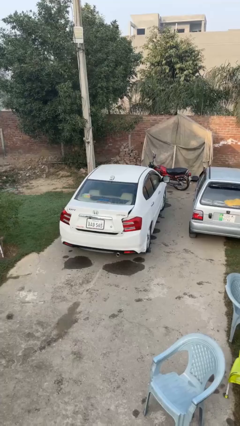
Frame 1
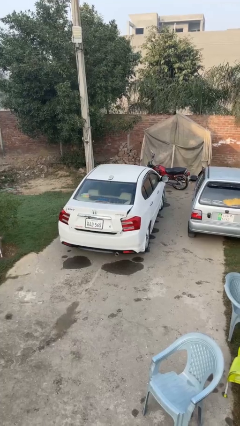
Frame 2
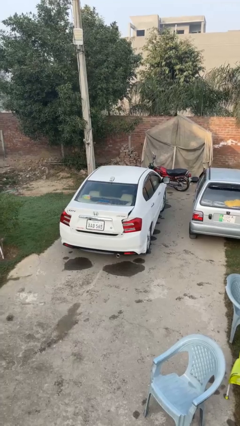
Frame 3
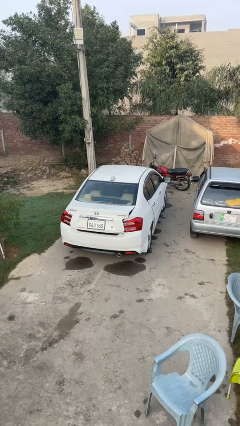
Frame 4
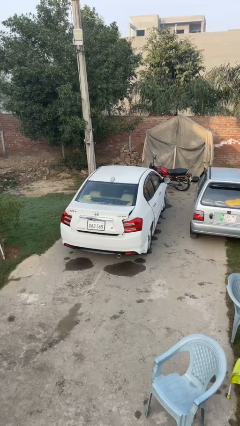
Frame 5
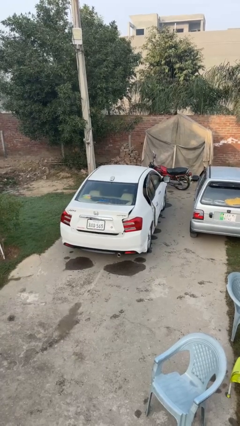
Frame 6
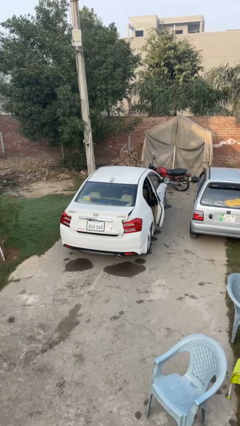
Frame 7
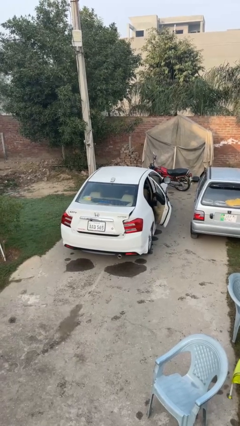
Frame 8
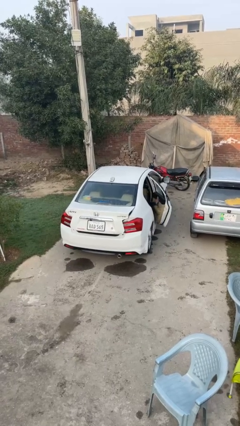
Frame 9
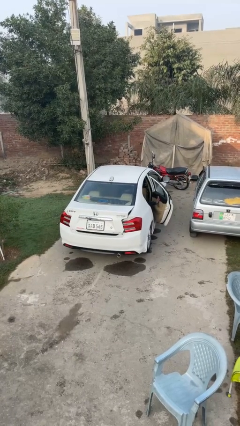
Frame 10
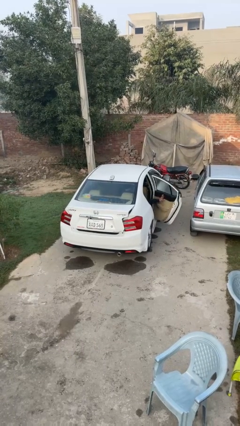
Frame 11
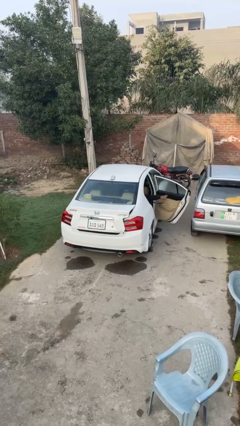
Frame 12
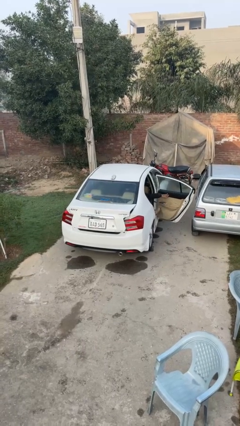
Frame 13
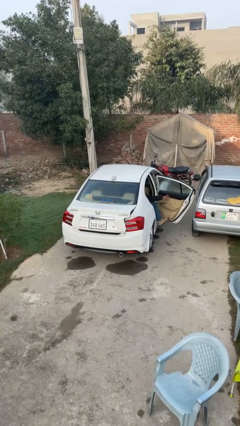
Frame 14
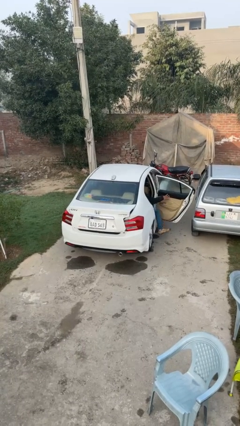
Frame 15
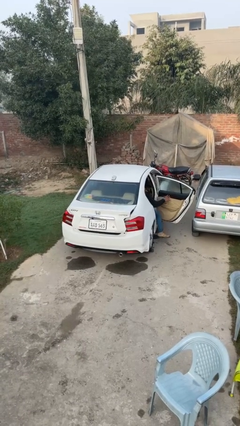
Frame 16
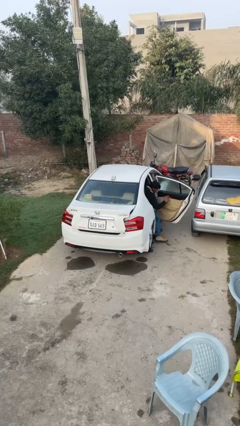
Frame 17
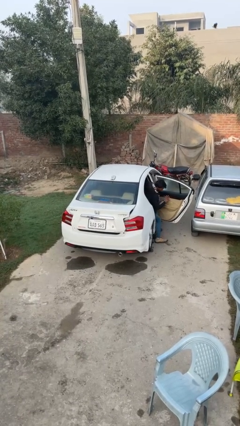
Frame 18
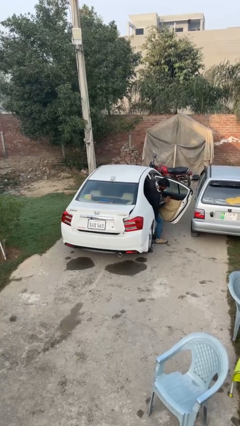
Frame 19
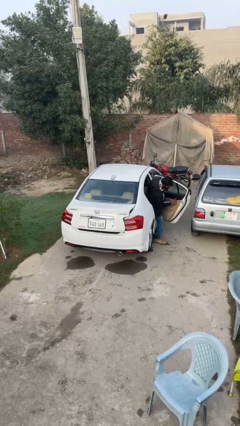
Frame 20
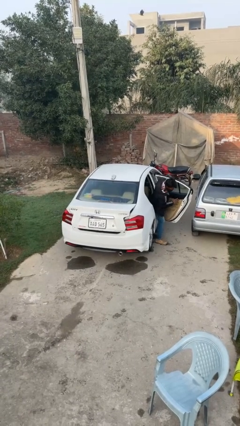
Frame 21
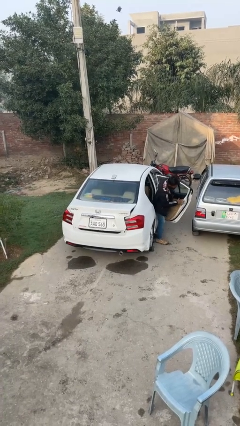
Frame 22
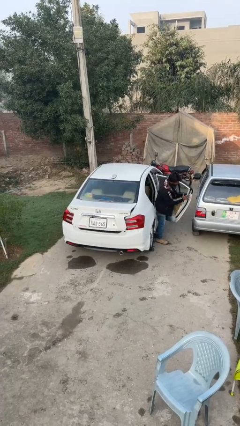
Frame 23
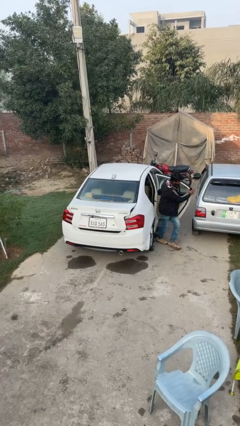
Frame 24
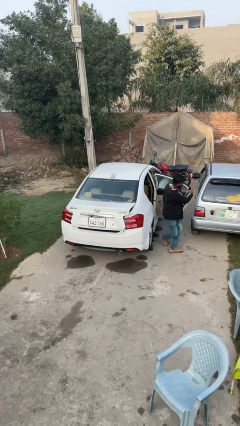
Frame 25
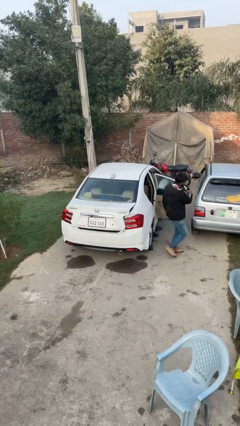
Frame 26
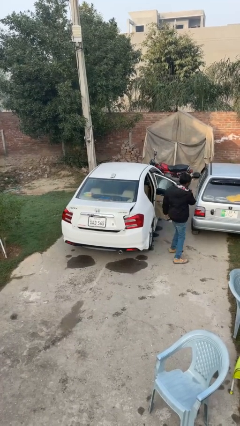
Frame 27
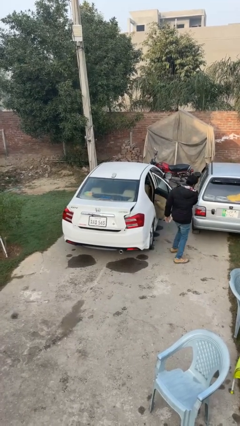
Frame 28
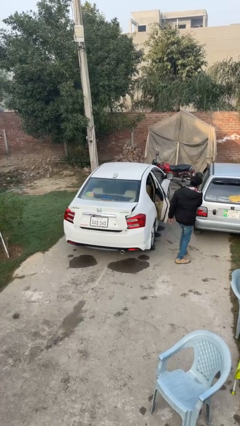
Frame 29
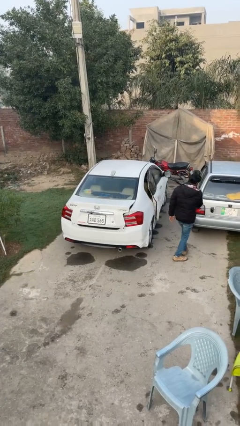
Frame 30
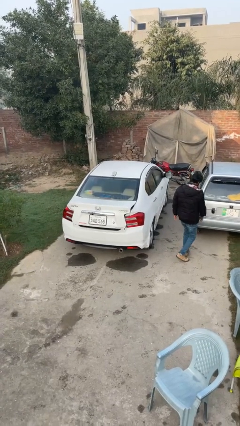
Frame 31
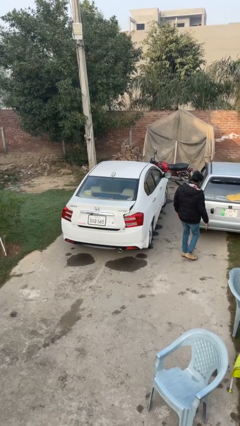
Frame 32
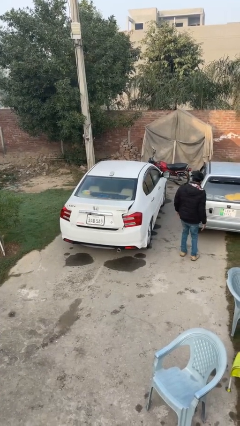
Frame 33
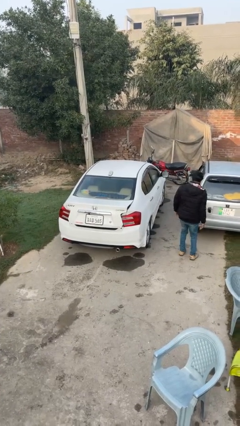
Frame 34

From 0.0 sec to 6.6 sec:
car drops off person

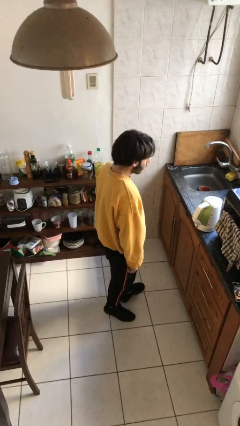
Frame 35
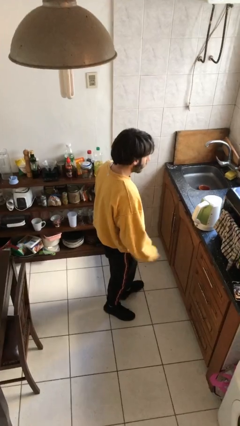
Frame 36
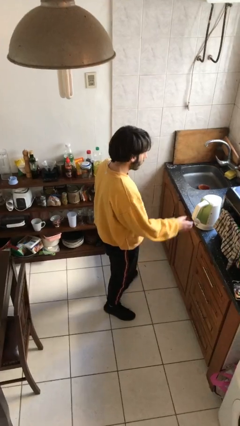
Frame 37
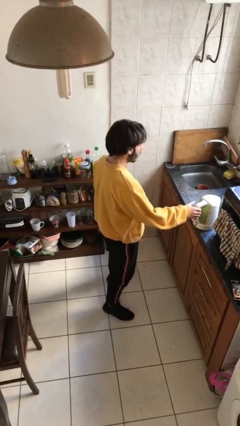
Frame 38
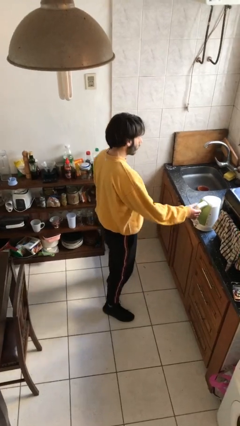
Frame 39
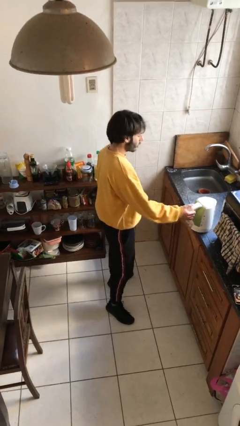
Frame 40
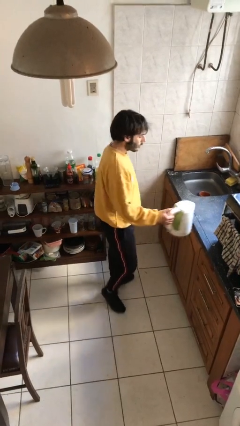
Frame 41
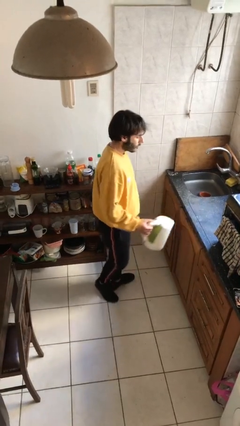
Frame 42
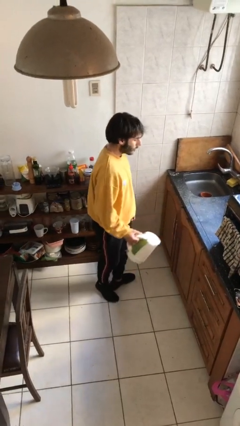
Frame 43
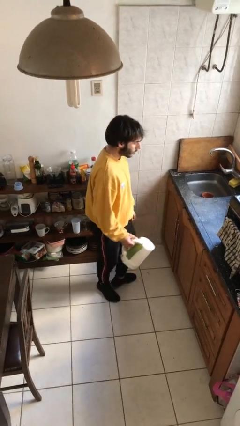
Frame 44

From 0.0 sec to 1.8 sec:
person picks up object from countertop

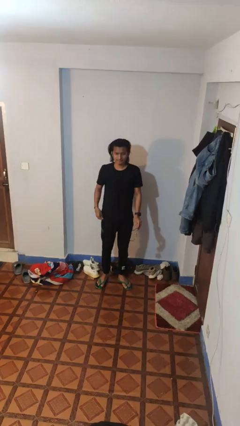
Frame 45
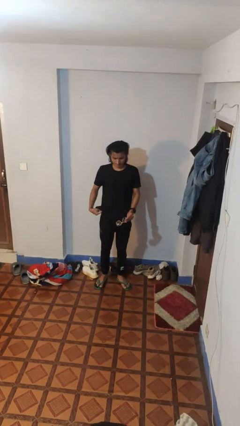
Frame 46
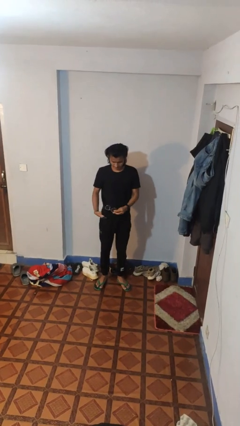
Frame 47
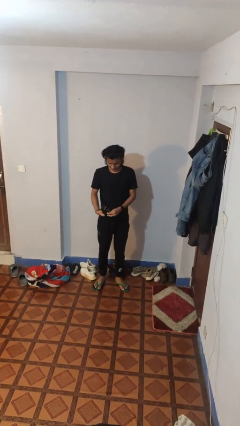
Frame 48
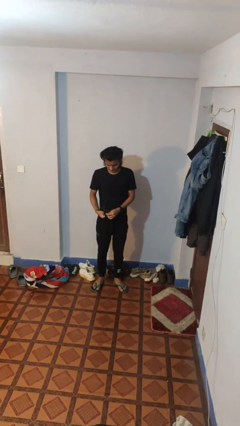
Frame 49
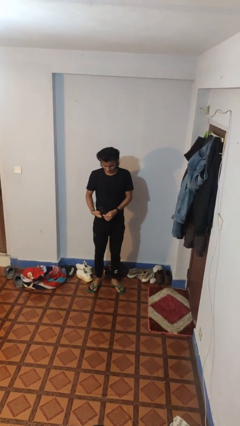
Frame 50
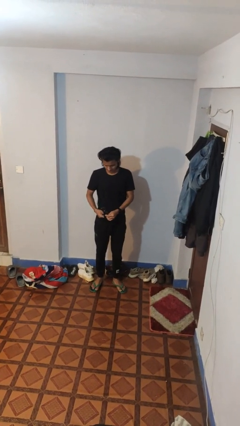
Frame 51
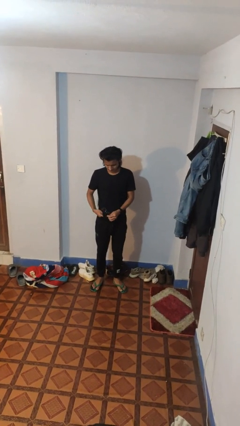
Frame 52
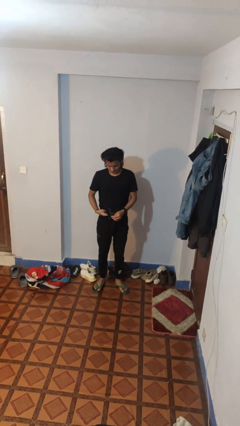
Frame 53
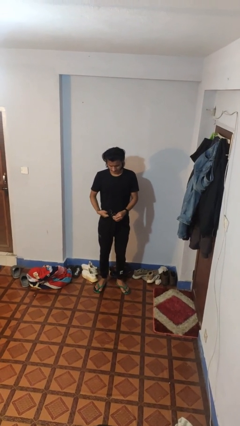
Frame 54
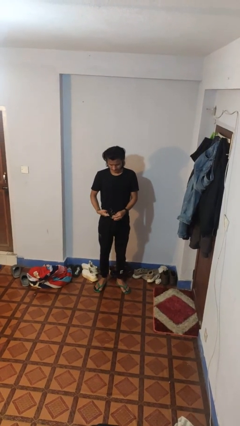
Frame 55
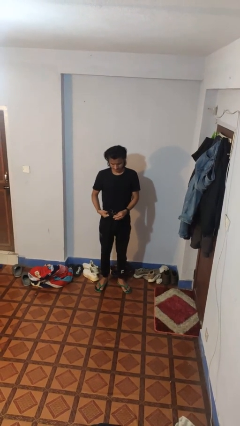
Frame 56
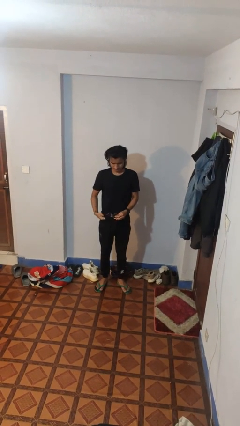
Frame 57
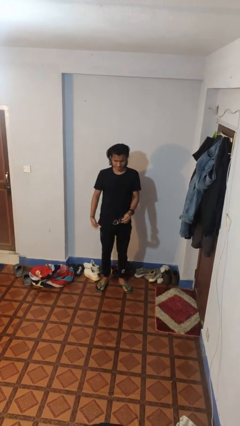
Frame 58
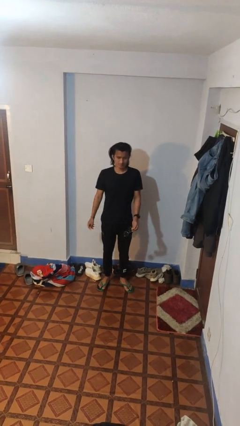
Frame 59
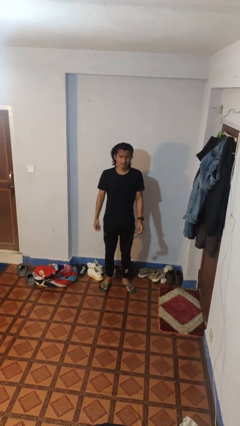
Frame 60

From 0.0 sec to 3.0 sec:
person cleans eyeglasses

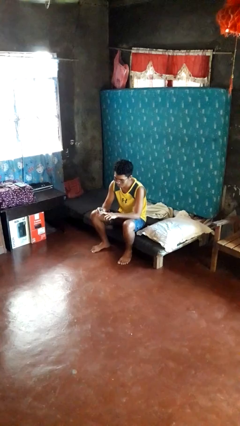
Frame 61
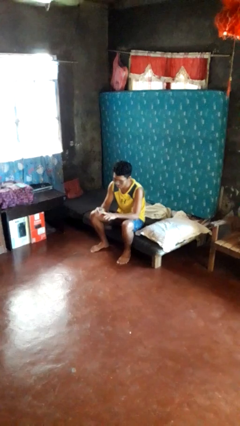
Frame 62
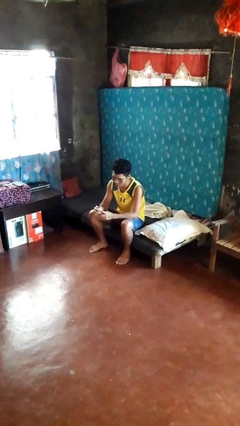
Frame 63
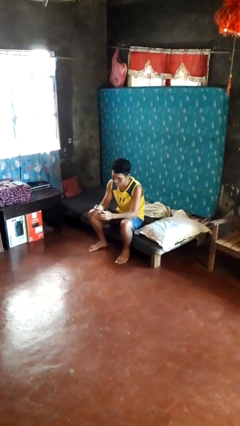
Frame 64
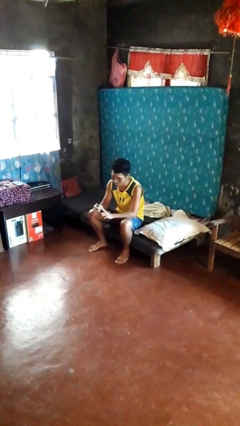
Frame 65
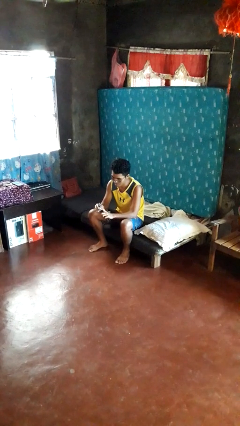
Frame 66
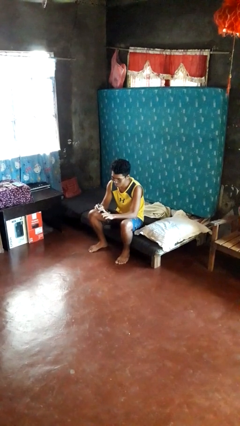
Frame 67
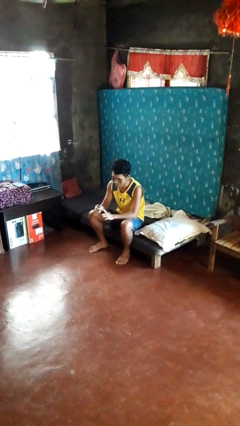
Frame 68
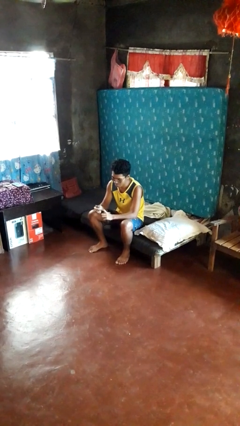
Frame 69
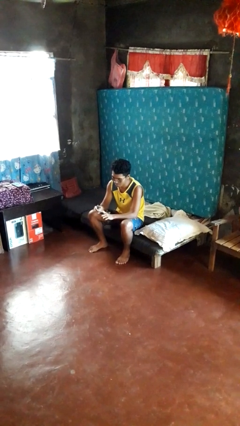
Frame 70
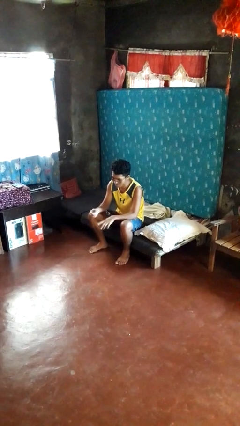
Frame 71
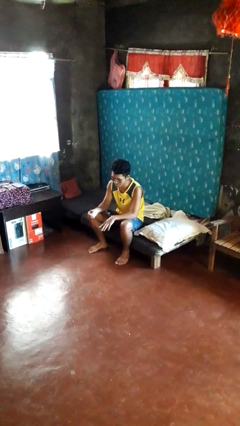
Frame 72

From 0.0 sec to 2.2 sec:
person files fingernails

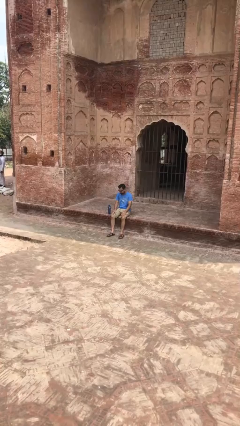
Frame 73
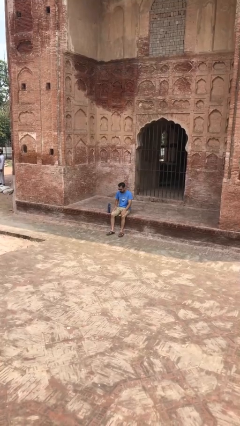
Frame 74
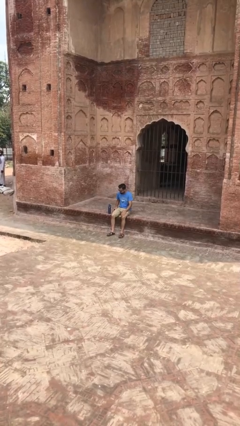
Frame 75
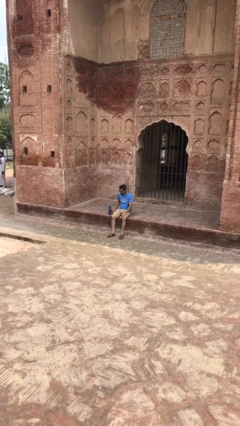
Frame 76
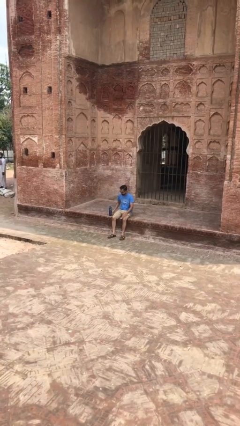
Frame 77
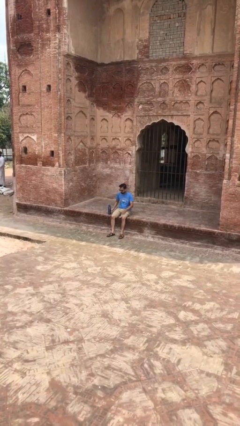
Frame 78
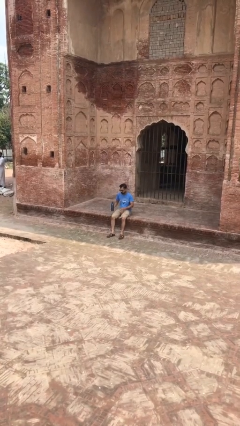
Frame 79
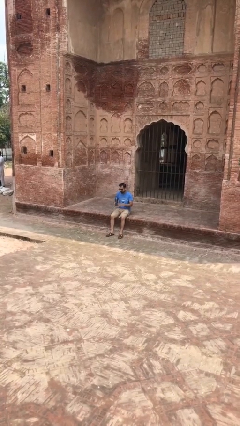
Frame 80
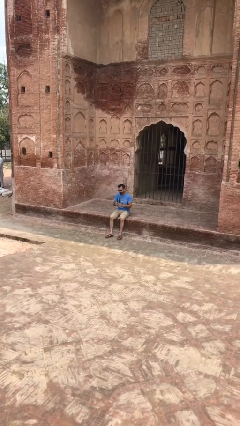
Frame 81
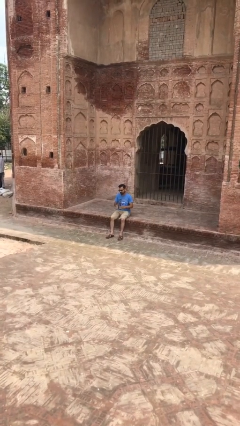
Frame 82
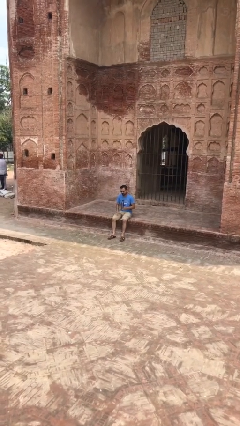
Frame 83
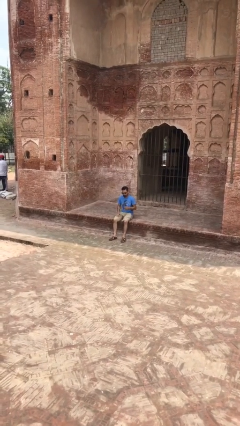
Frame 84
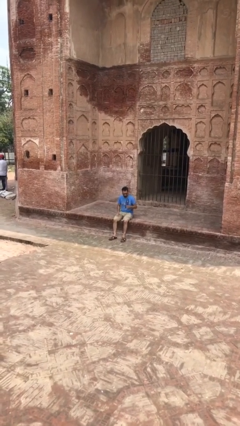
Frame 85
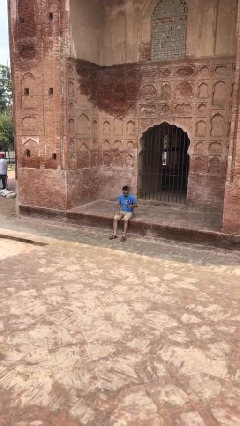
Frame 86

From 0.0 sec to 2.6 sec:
person picks up object from floor

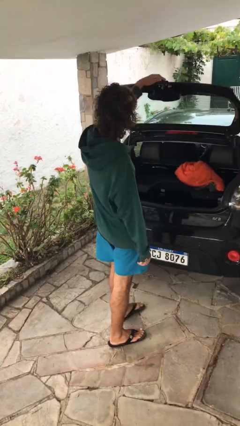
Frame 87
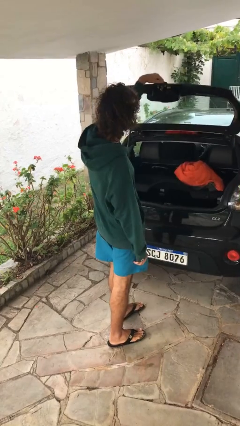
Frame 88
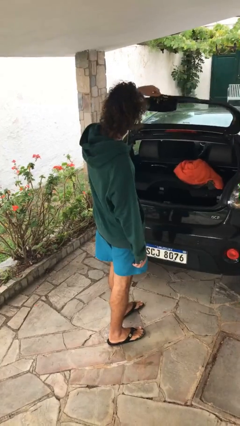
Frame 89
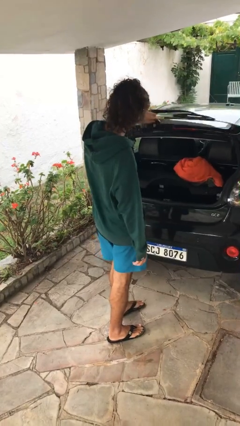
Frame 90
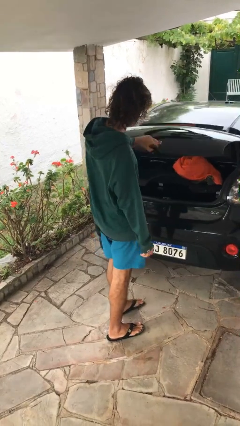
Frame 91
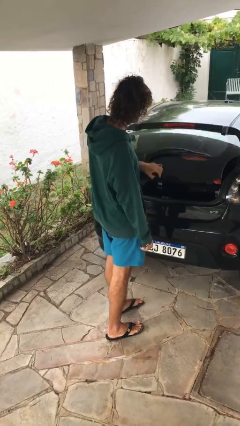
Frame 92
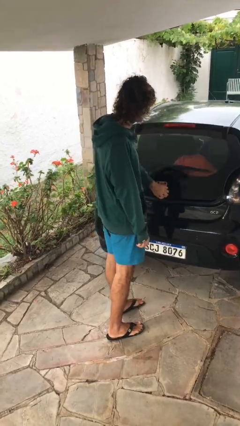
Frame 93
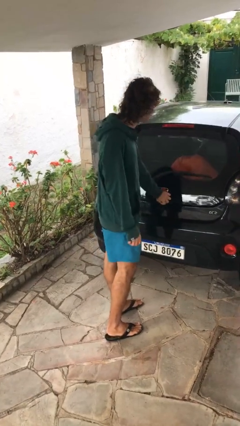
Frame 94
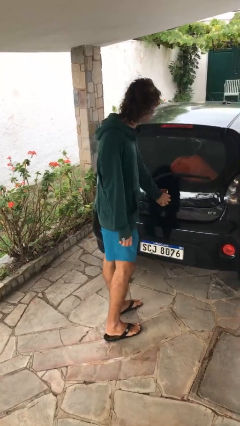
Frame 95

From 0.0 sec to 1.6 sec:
person closes car trunk

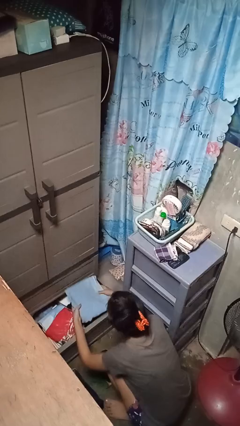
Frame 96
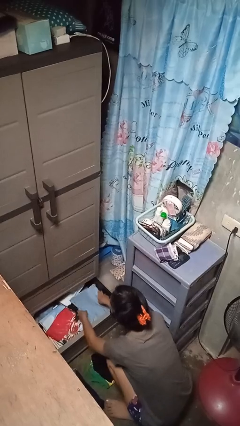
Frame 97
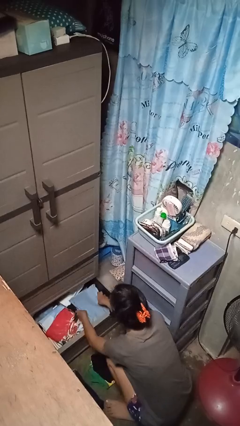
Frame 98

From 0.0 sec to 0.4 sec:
person puts clothes into dresser
